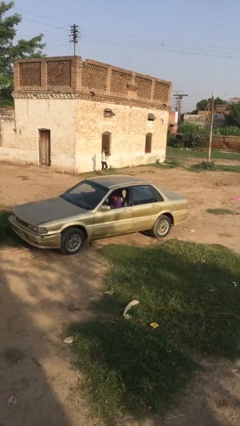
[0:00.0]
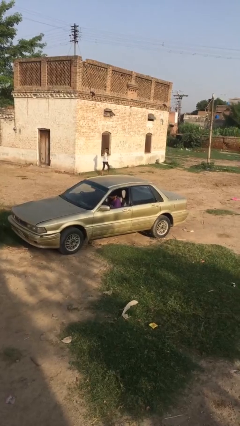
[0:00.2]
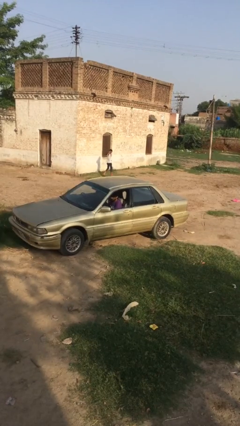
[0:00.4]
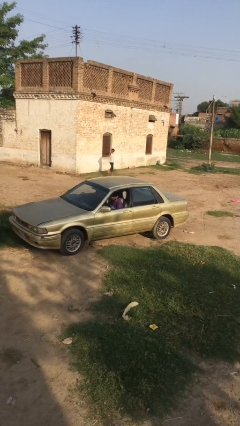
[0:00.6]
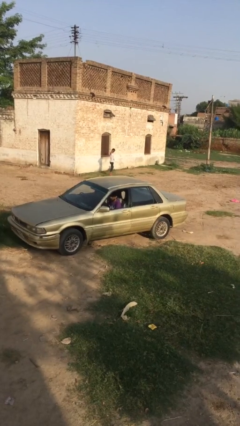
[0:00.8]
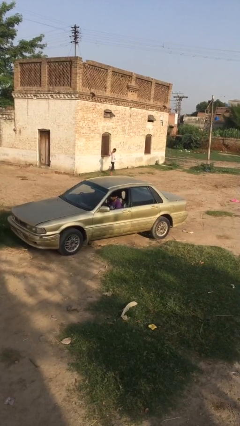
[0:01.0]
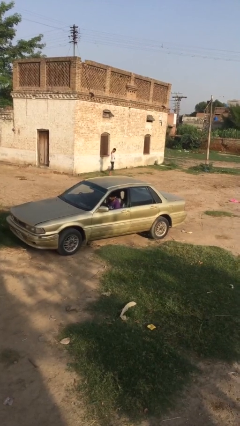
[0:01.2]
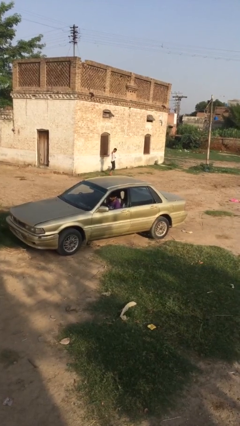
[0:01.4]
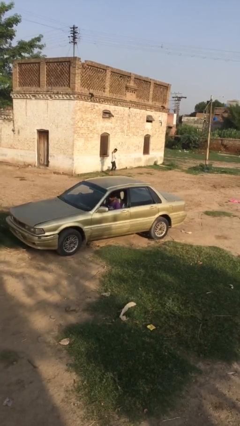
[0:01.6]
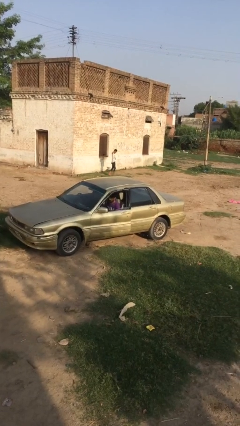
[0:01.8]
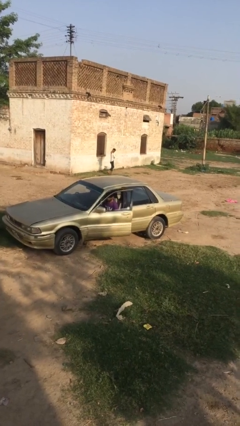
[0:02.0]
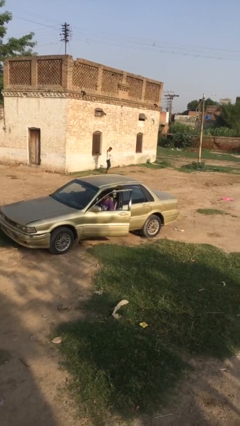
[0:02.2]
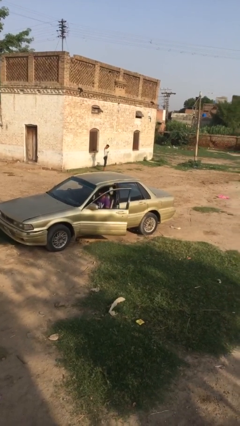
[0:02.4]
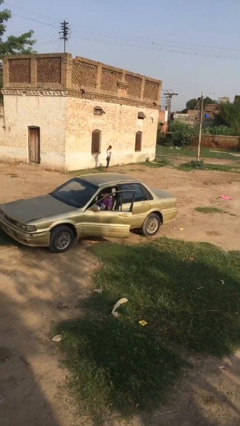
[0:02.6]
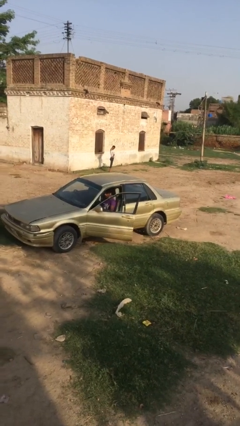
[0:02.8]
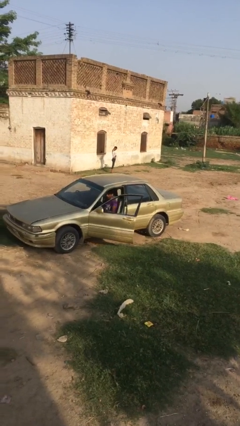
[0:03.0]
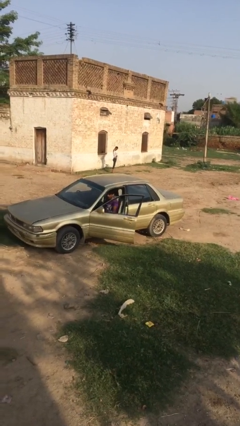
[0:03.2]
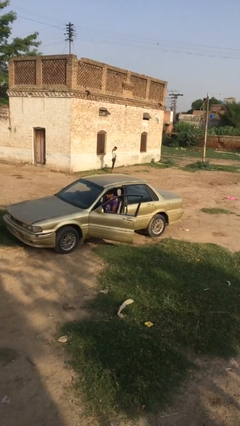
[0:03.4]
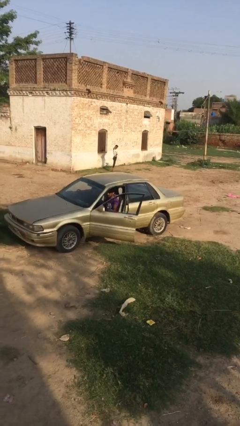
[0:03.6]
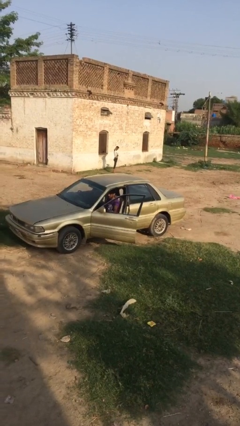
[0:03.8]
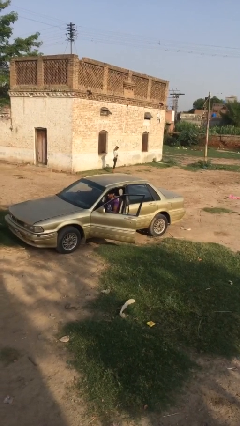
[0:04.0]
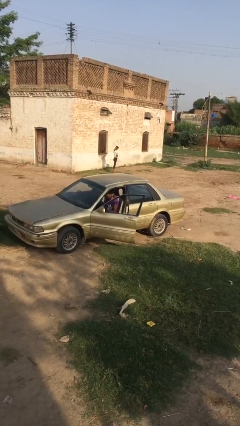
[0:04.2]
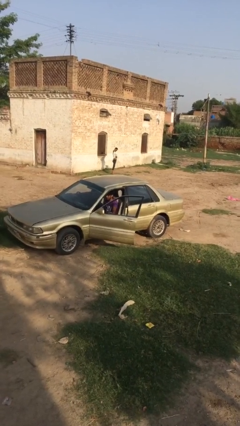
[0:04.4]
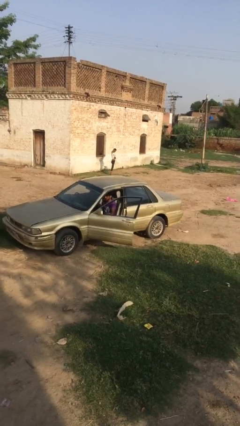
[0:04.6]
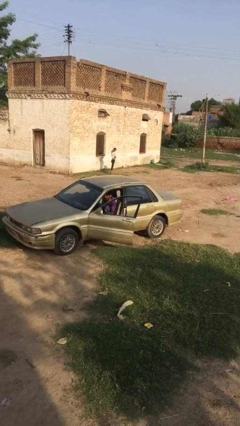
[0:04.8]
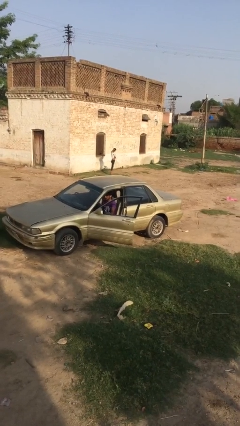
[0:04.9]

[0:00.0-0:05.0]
person opens car door

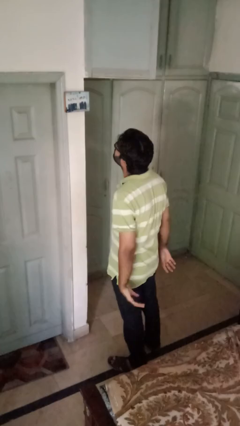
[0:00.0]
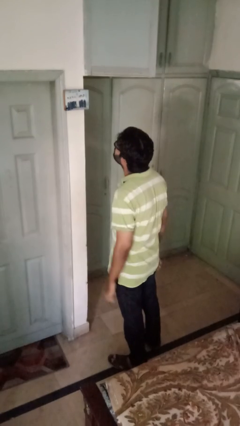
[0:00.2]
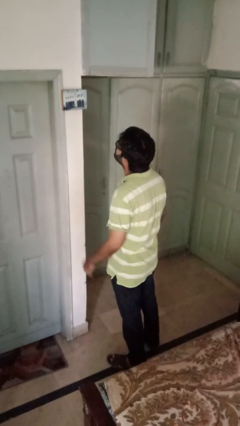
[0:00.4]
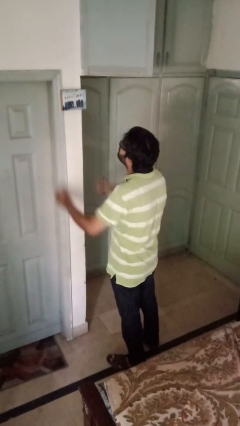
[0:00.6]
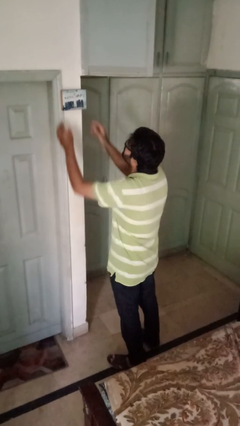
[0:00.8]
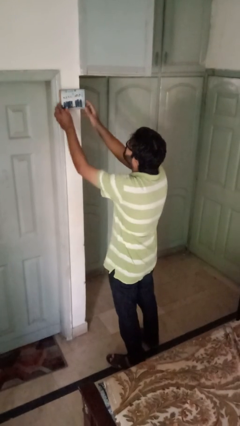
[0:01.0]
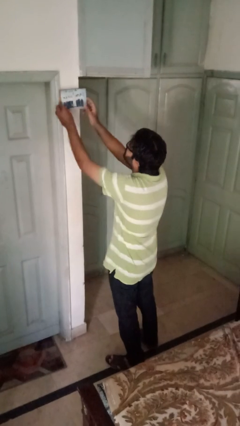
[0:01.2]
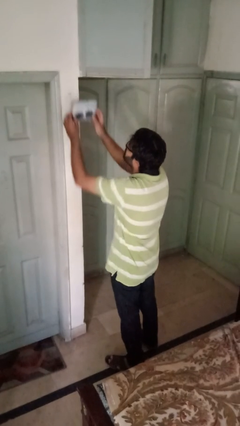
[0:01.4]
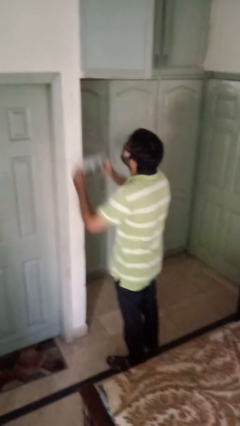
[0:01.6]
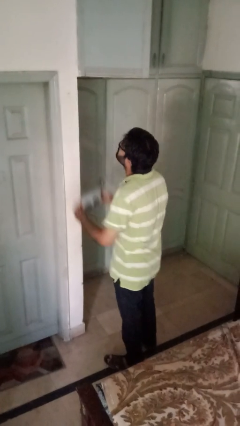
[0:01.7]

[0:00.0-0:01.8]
person takes down picture frame

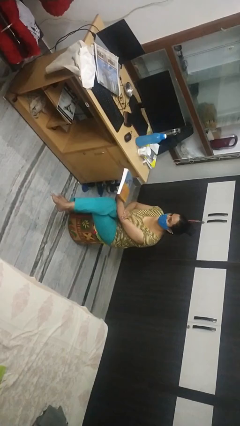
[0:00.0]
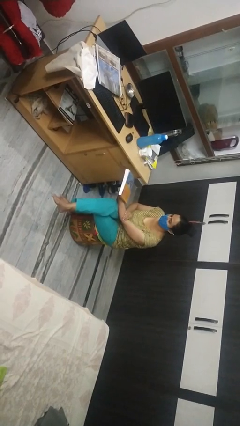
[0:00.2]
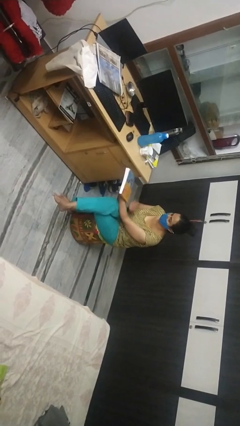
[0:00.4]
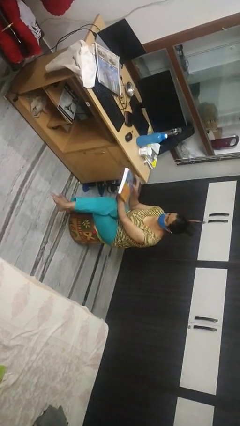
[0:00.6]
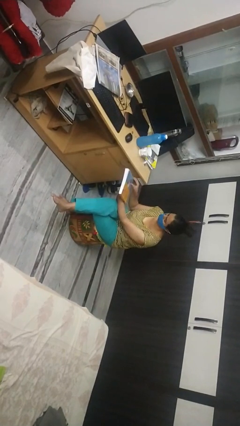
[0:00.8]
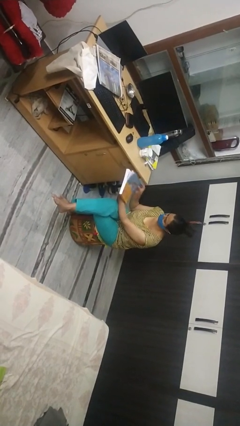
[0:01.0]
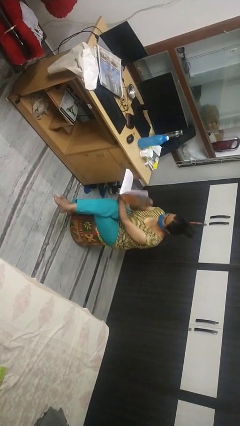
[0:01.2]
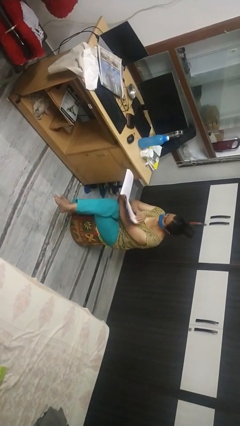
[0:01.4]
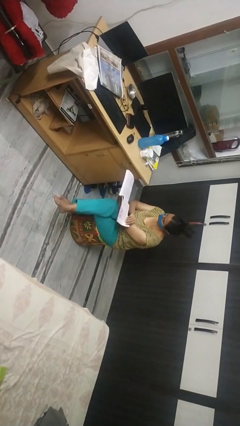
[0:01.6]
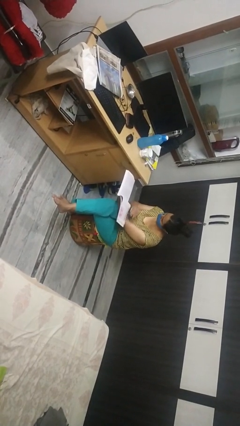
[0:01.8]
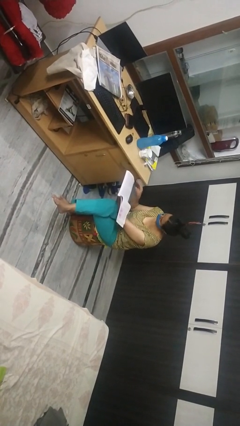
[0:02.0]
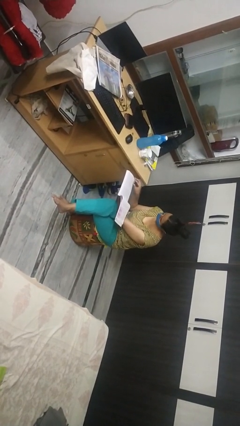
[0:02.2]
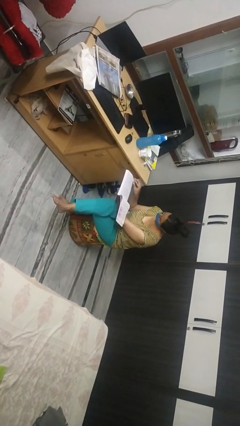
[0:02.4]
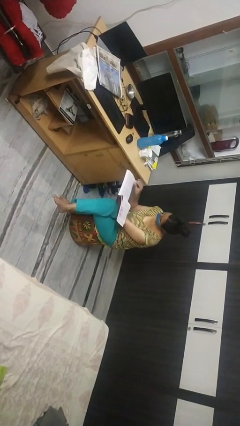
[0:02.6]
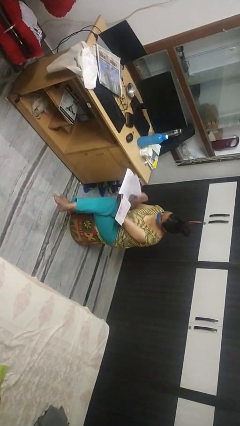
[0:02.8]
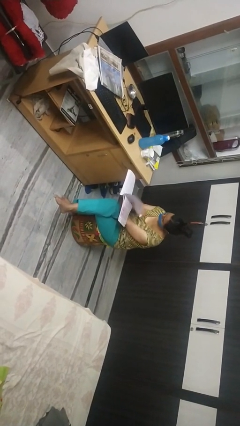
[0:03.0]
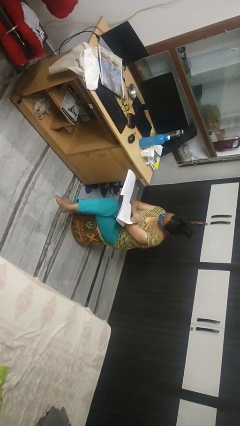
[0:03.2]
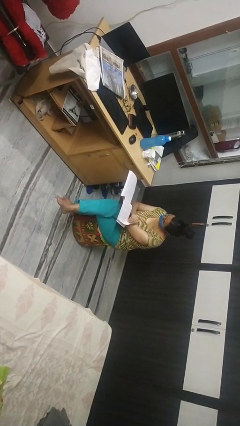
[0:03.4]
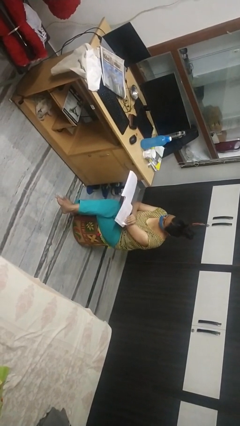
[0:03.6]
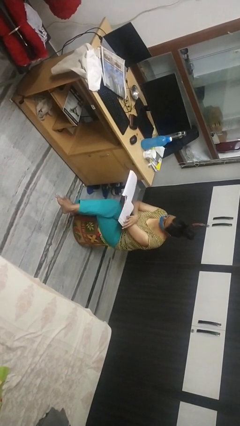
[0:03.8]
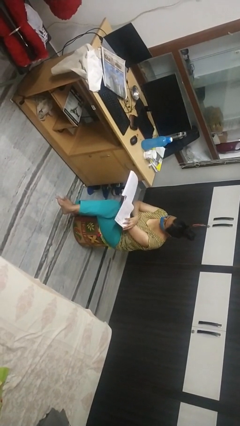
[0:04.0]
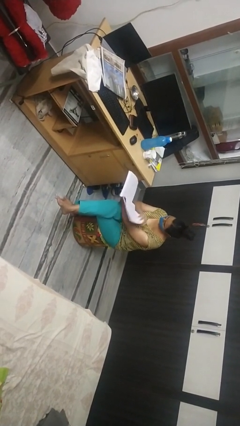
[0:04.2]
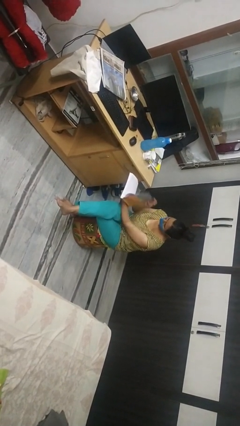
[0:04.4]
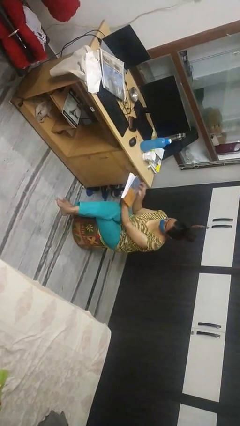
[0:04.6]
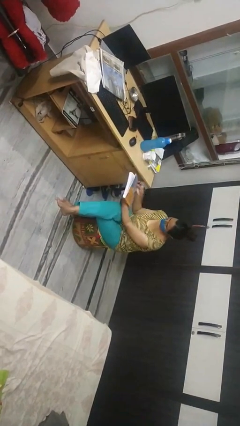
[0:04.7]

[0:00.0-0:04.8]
person reads book

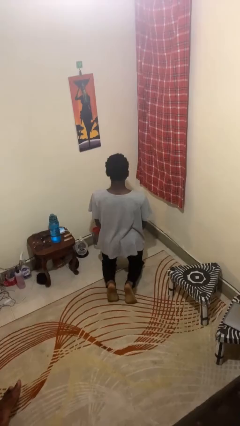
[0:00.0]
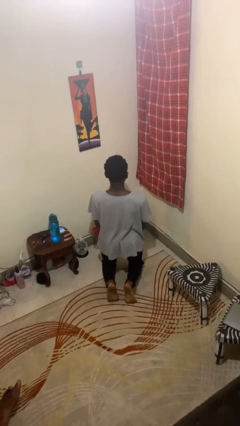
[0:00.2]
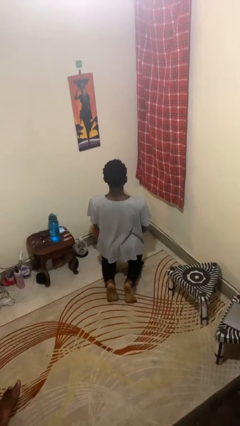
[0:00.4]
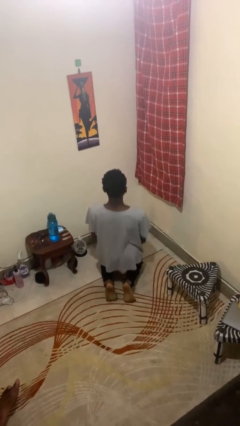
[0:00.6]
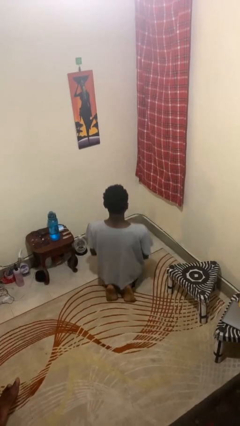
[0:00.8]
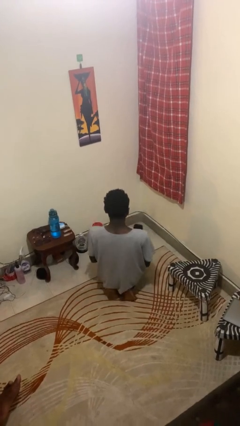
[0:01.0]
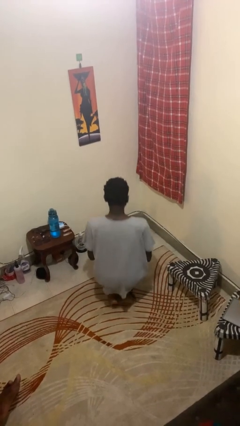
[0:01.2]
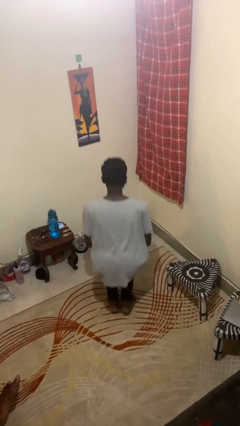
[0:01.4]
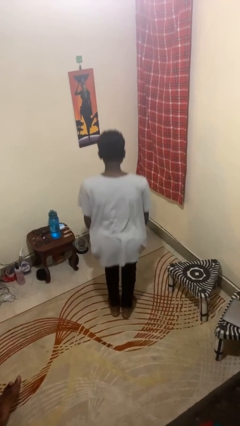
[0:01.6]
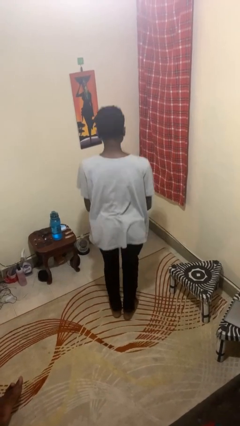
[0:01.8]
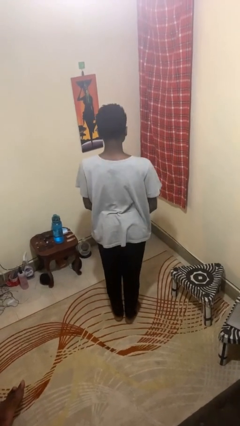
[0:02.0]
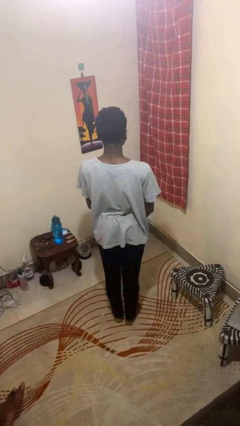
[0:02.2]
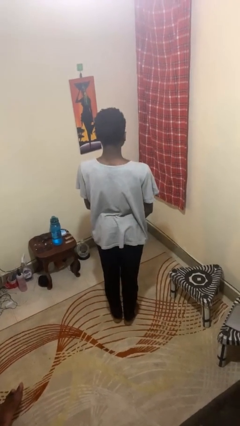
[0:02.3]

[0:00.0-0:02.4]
person stands up from floor

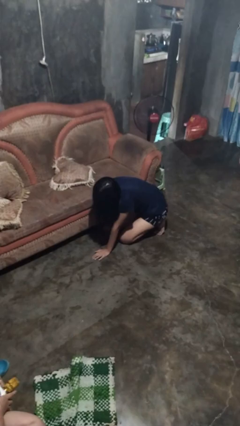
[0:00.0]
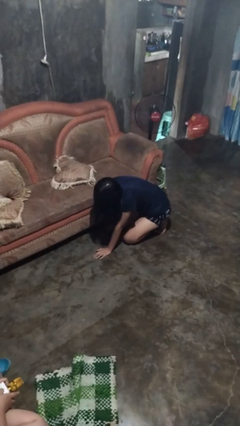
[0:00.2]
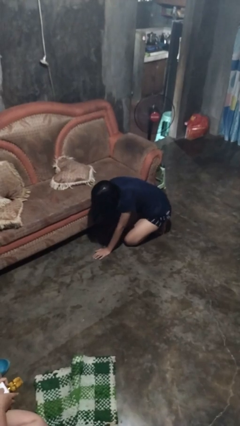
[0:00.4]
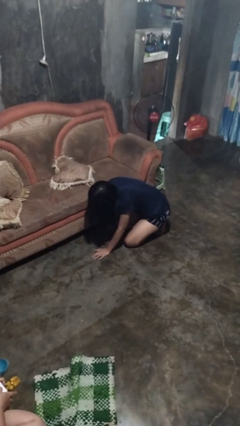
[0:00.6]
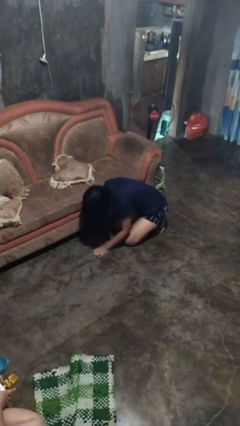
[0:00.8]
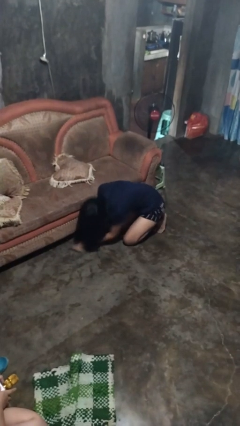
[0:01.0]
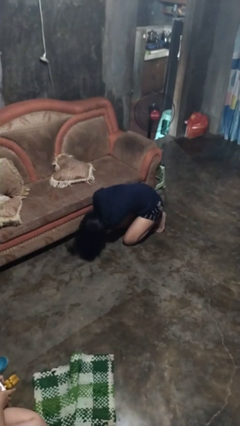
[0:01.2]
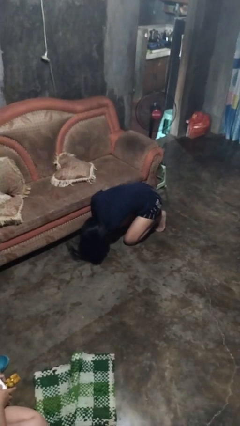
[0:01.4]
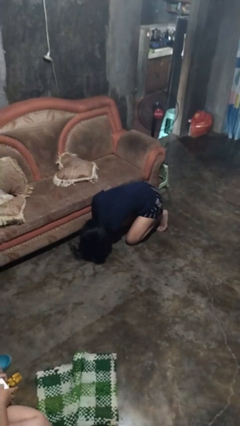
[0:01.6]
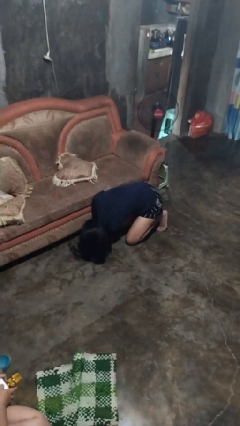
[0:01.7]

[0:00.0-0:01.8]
person searches under couch

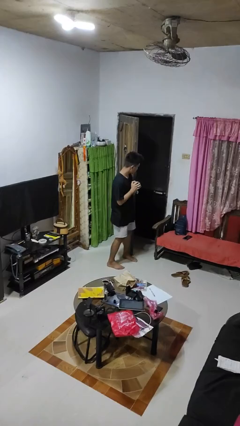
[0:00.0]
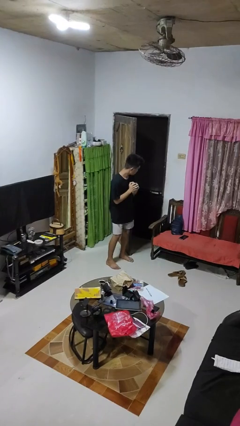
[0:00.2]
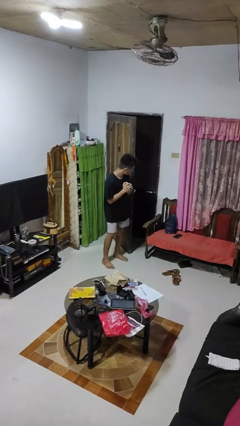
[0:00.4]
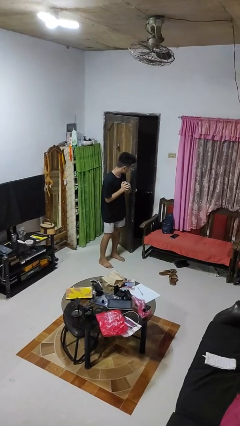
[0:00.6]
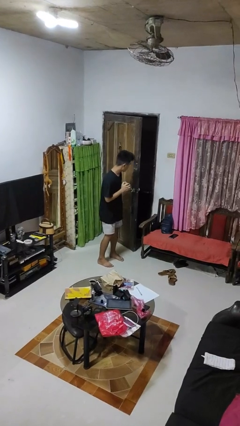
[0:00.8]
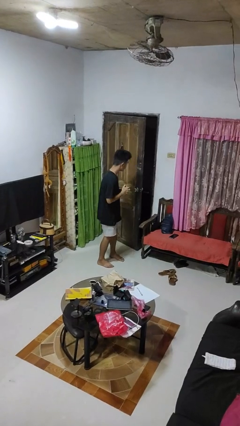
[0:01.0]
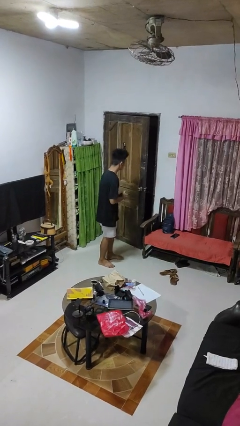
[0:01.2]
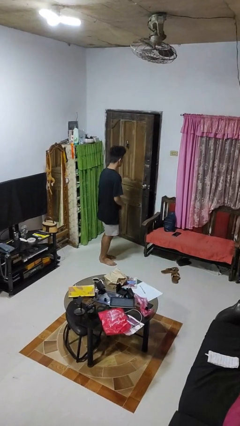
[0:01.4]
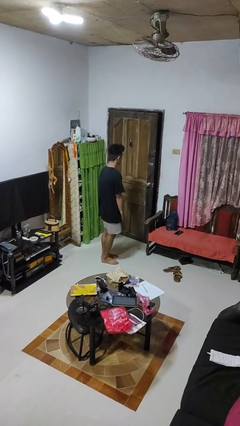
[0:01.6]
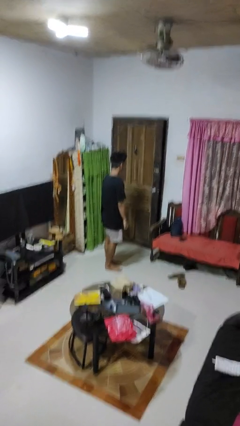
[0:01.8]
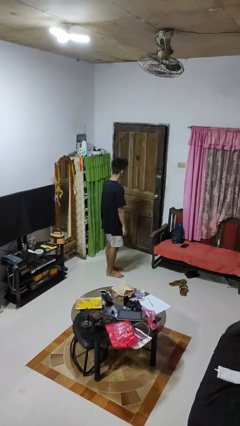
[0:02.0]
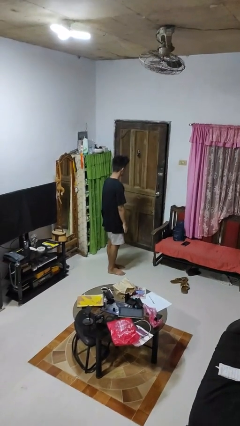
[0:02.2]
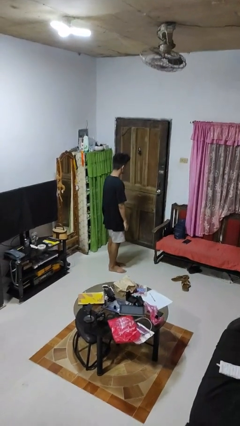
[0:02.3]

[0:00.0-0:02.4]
person closes door with hip
